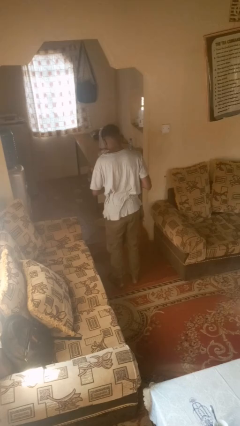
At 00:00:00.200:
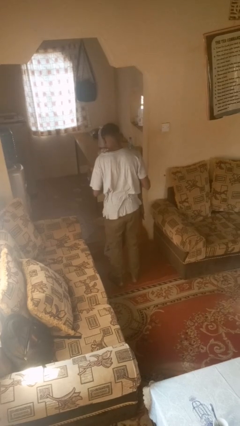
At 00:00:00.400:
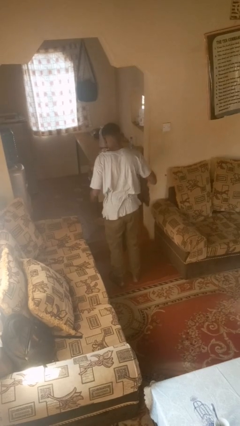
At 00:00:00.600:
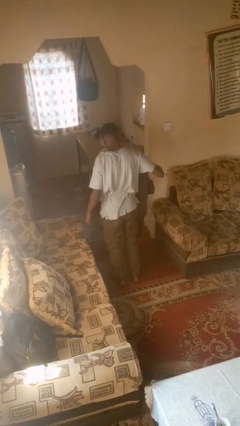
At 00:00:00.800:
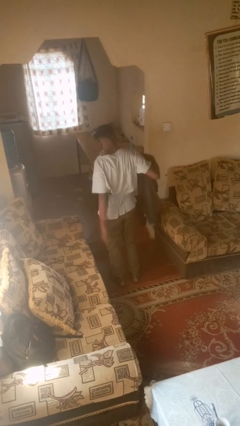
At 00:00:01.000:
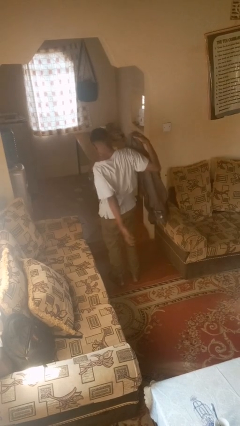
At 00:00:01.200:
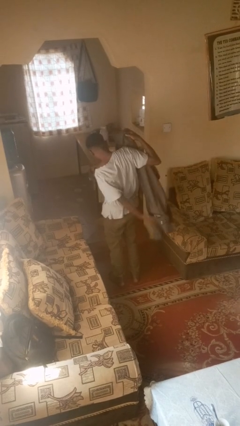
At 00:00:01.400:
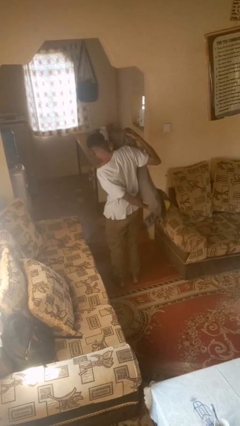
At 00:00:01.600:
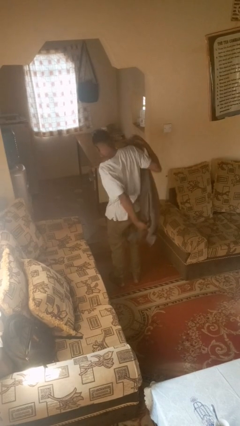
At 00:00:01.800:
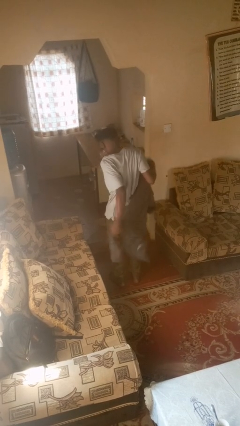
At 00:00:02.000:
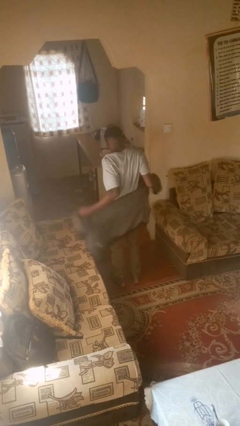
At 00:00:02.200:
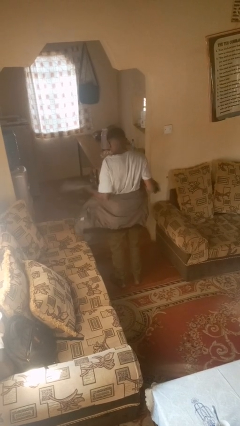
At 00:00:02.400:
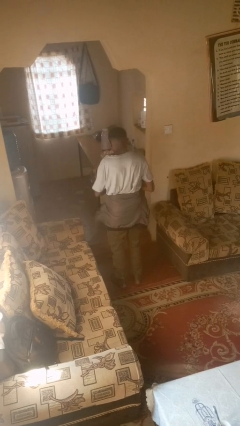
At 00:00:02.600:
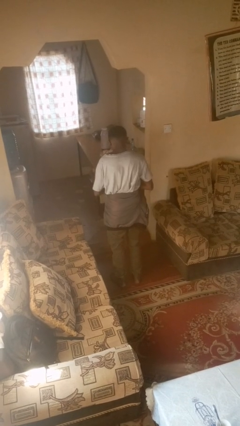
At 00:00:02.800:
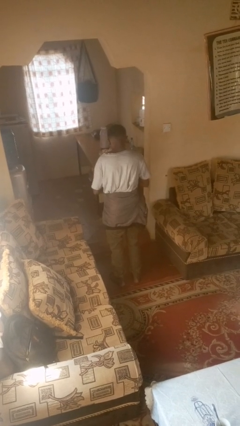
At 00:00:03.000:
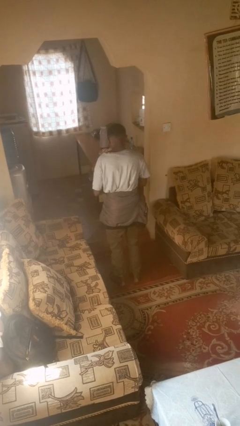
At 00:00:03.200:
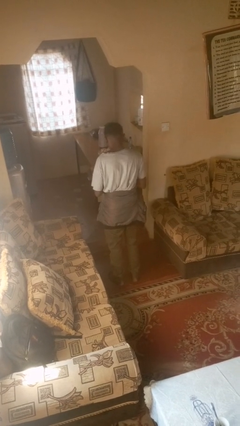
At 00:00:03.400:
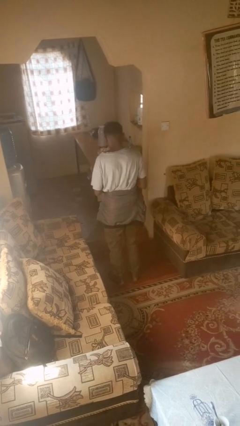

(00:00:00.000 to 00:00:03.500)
person ties jacket around waist

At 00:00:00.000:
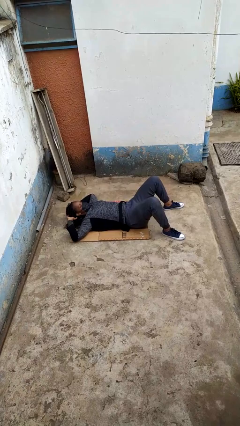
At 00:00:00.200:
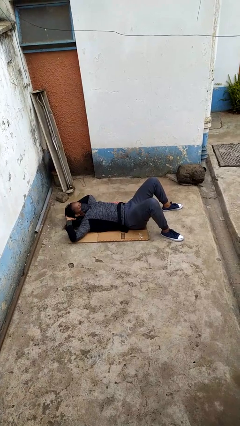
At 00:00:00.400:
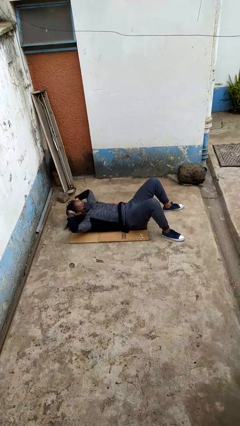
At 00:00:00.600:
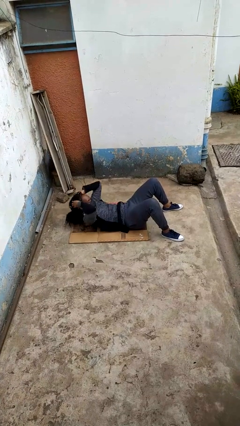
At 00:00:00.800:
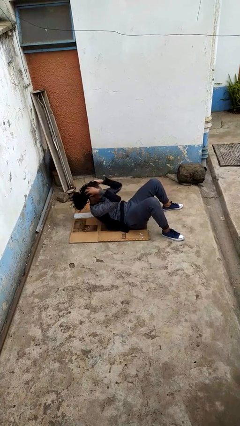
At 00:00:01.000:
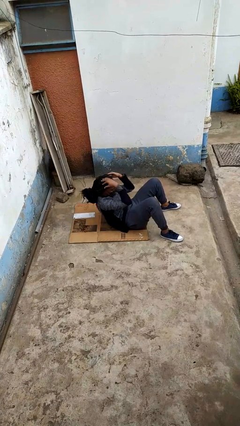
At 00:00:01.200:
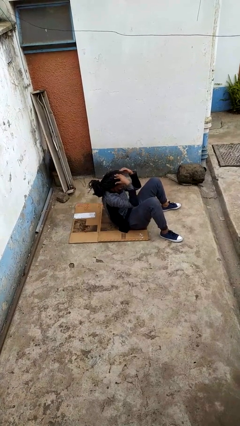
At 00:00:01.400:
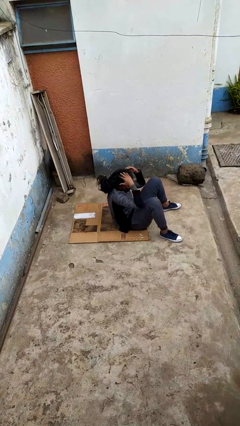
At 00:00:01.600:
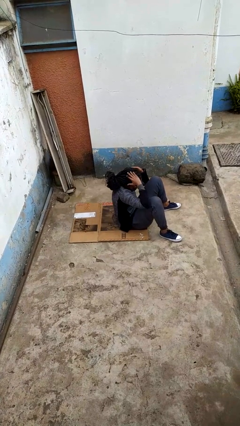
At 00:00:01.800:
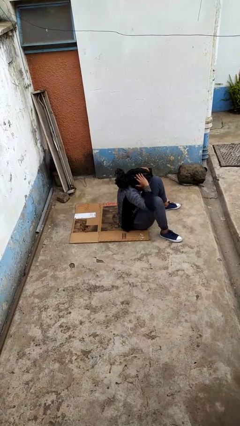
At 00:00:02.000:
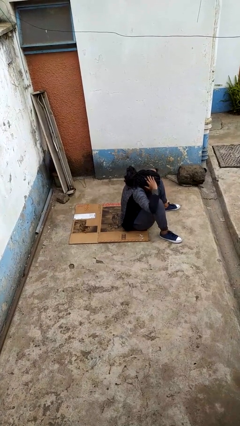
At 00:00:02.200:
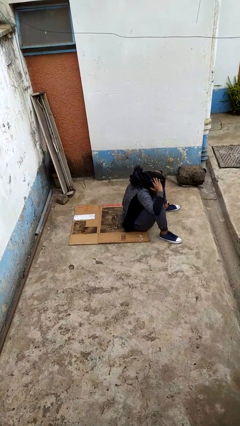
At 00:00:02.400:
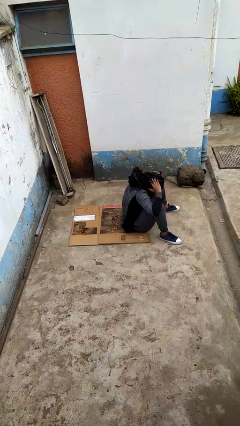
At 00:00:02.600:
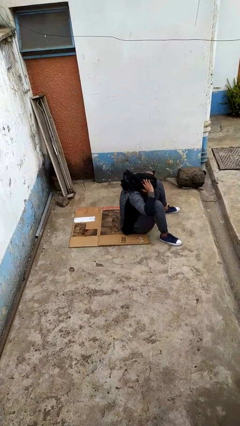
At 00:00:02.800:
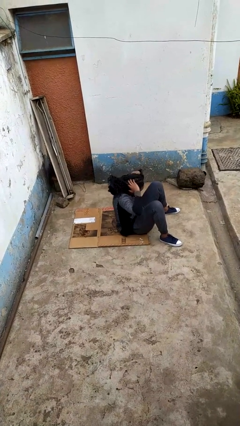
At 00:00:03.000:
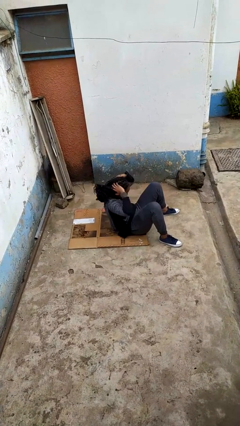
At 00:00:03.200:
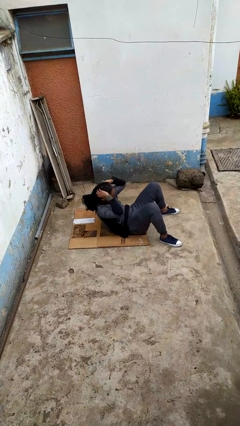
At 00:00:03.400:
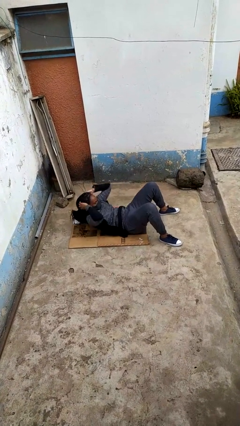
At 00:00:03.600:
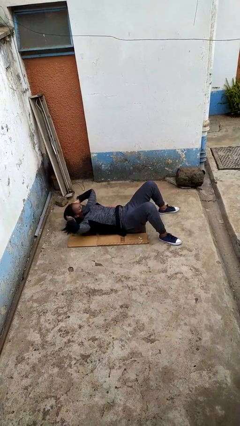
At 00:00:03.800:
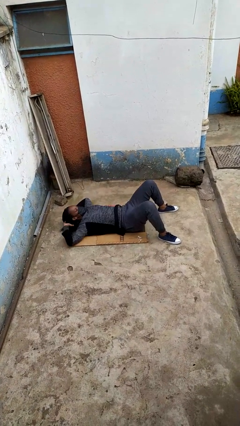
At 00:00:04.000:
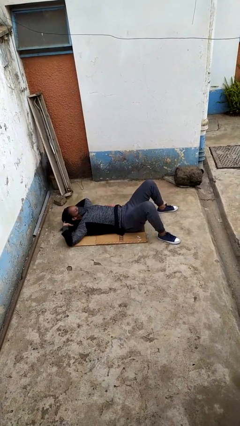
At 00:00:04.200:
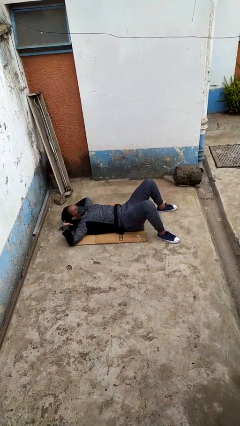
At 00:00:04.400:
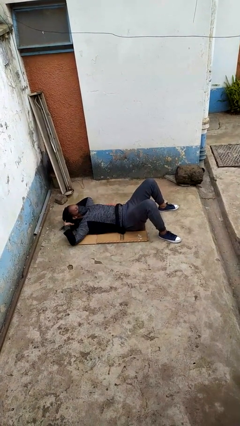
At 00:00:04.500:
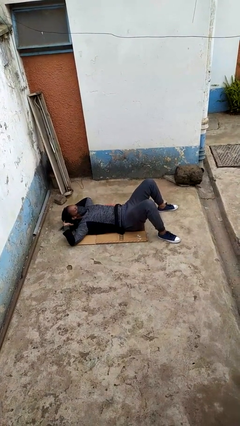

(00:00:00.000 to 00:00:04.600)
person exercises with situp

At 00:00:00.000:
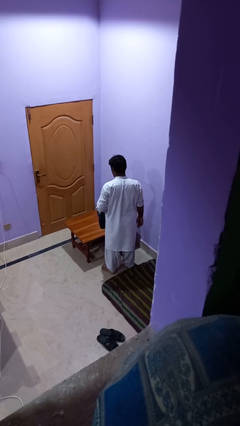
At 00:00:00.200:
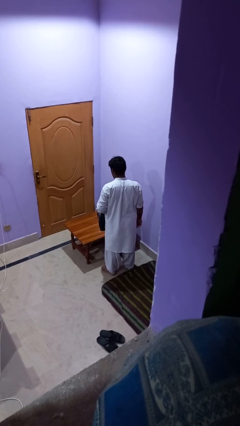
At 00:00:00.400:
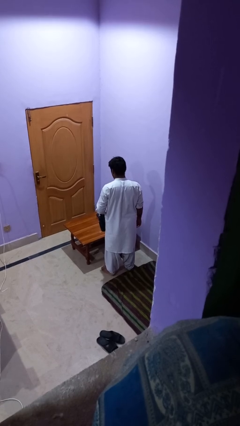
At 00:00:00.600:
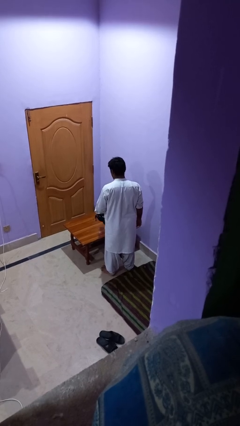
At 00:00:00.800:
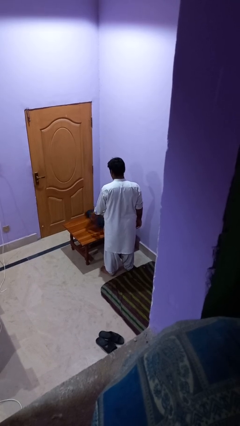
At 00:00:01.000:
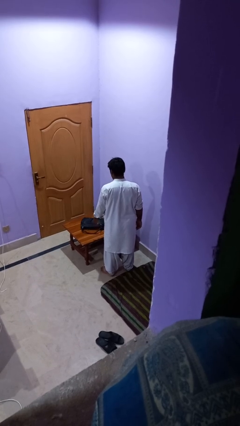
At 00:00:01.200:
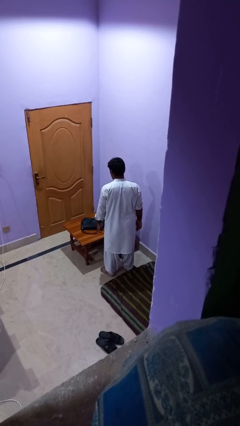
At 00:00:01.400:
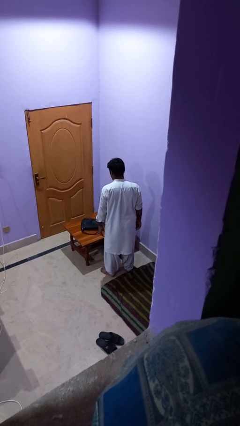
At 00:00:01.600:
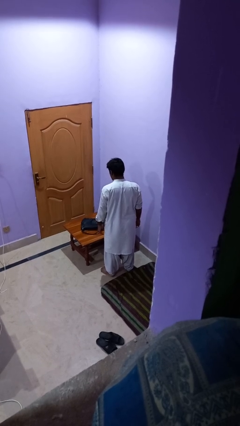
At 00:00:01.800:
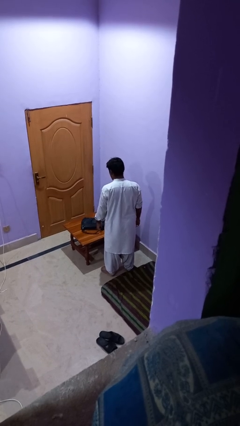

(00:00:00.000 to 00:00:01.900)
person throws object on table

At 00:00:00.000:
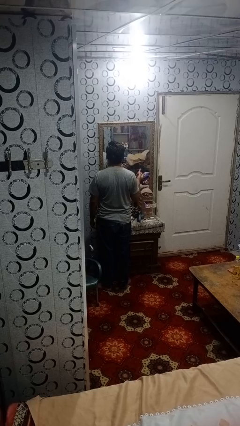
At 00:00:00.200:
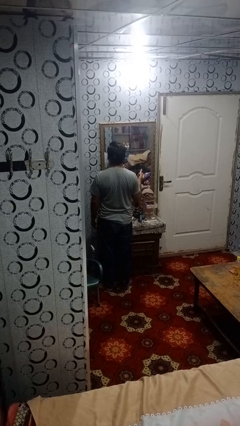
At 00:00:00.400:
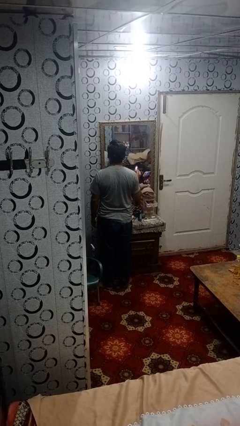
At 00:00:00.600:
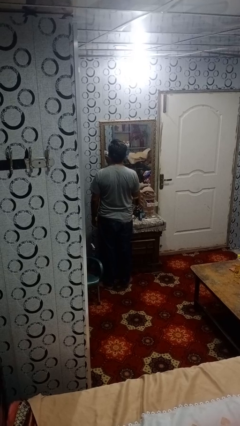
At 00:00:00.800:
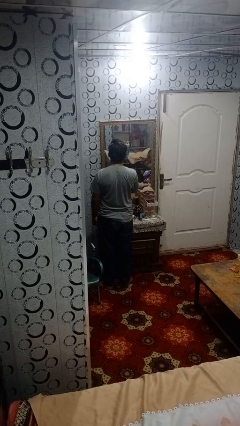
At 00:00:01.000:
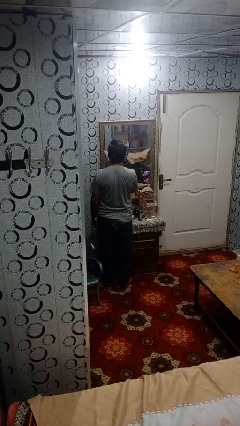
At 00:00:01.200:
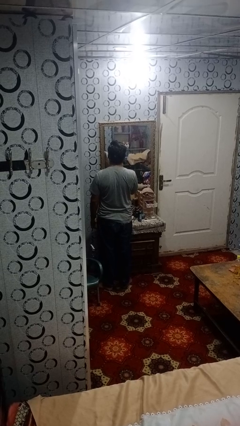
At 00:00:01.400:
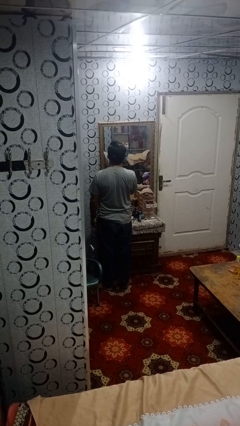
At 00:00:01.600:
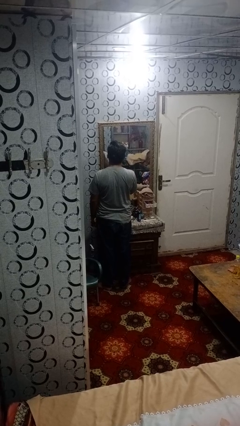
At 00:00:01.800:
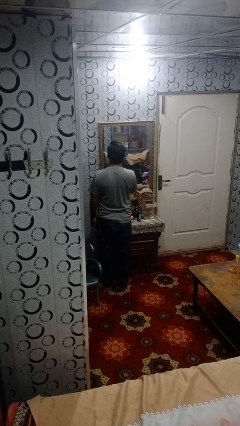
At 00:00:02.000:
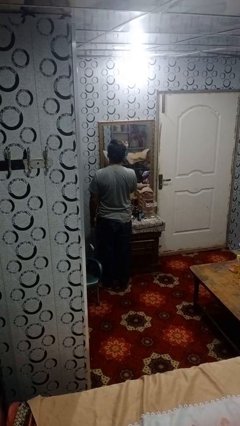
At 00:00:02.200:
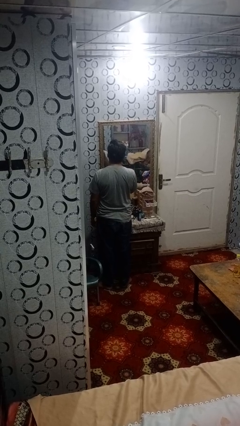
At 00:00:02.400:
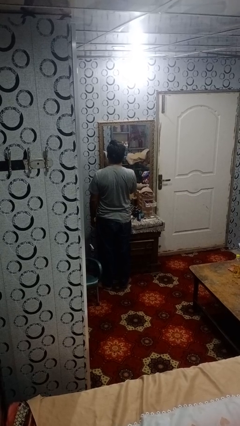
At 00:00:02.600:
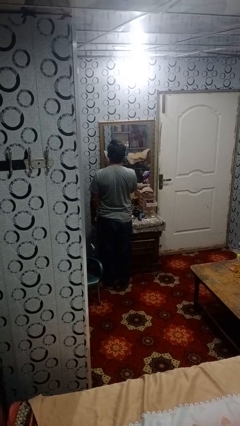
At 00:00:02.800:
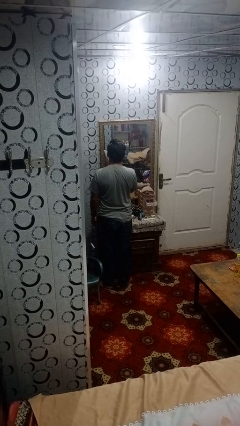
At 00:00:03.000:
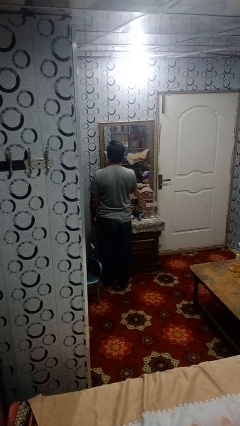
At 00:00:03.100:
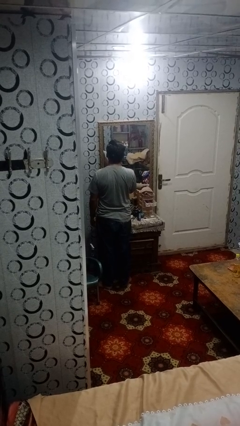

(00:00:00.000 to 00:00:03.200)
person applies lip makeup

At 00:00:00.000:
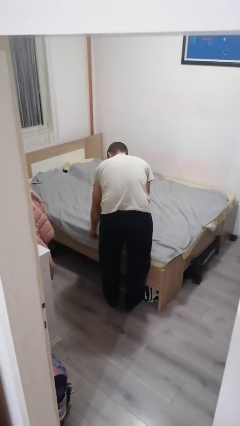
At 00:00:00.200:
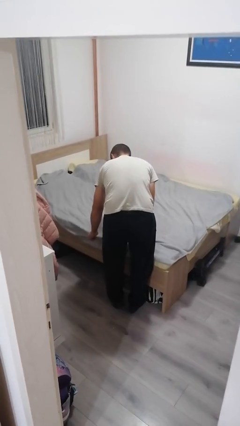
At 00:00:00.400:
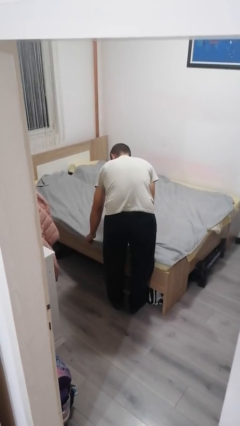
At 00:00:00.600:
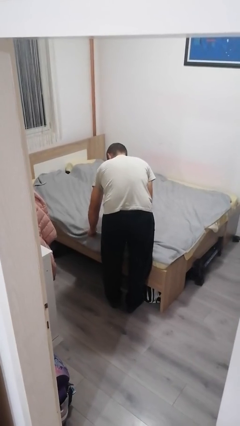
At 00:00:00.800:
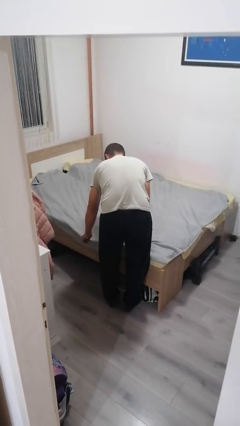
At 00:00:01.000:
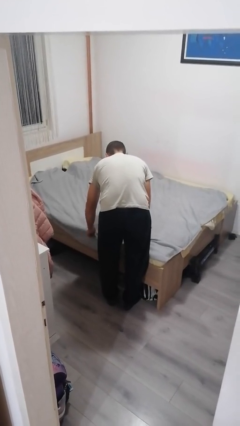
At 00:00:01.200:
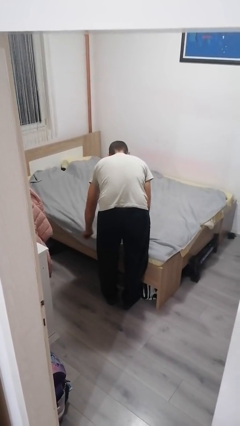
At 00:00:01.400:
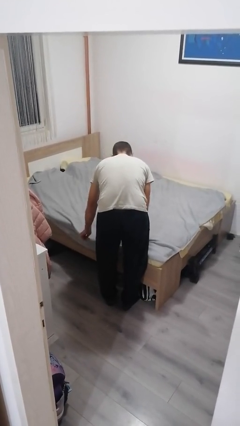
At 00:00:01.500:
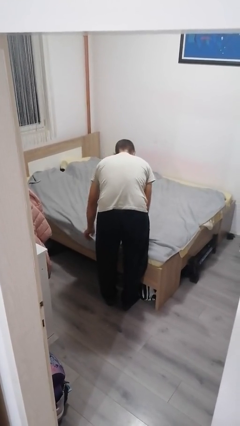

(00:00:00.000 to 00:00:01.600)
person makes bed

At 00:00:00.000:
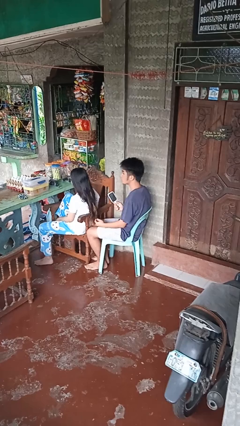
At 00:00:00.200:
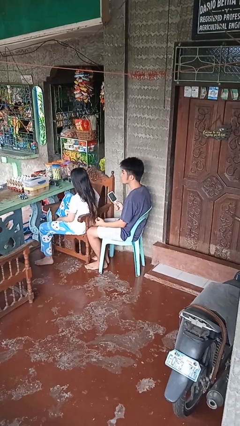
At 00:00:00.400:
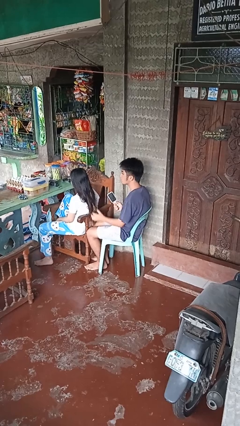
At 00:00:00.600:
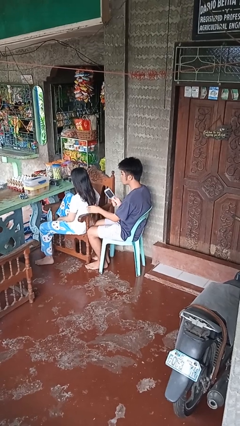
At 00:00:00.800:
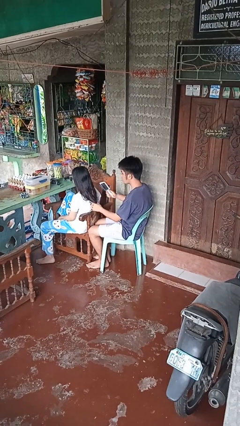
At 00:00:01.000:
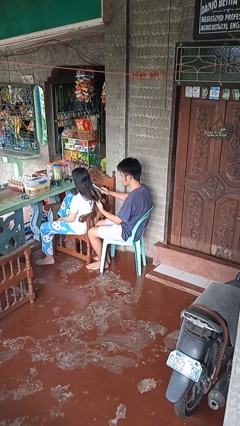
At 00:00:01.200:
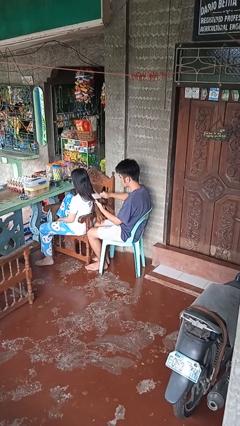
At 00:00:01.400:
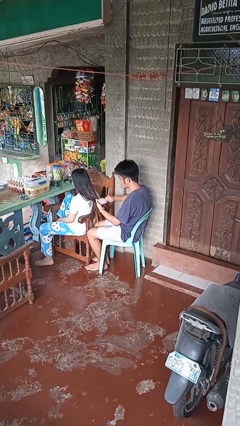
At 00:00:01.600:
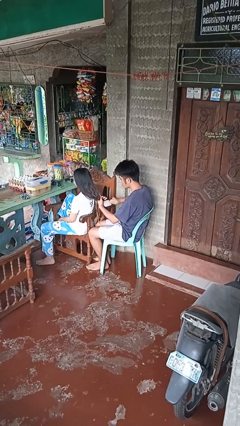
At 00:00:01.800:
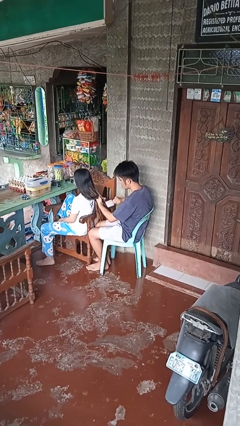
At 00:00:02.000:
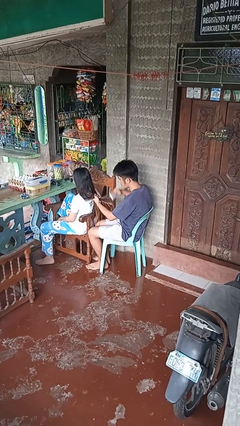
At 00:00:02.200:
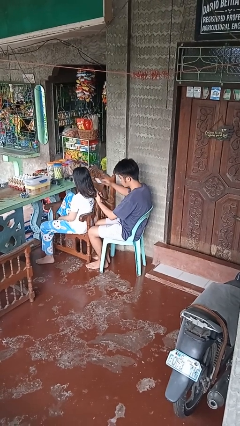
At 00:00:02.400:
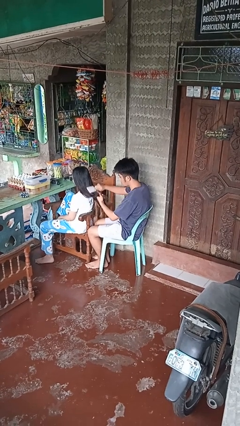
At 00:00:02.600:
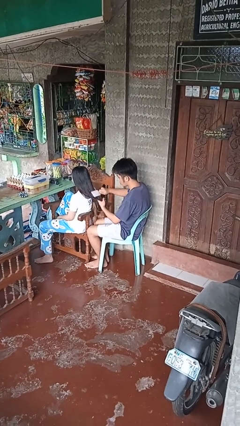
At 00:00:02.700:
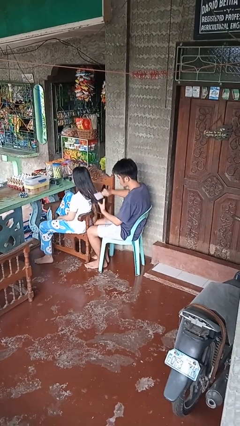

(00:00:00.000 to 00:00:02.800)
person brushes hair of person
